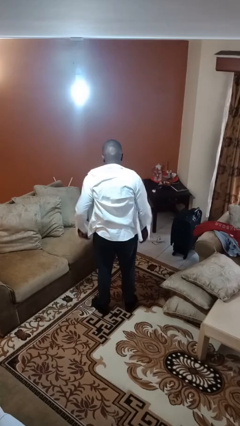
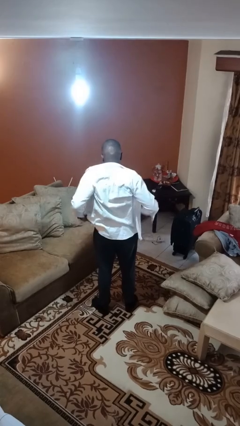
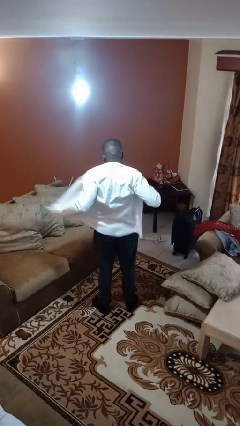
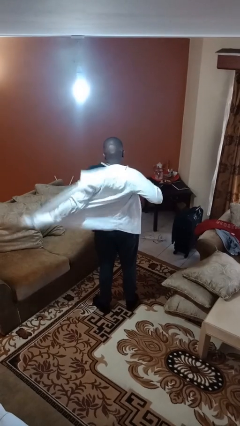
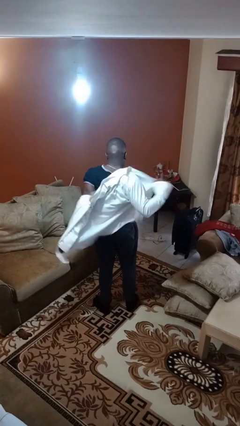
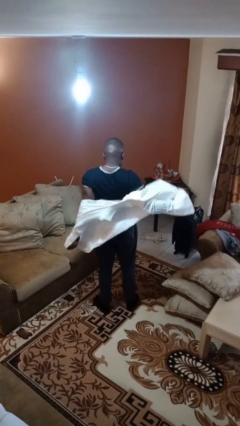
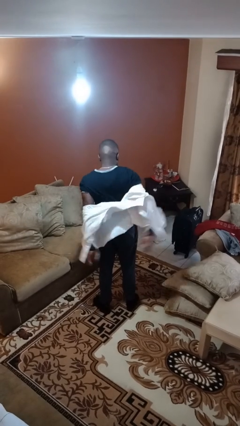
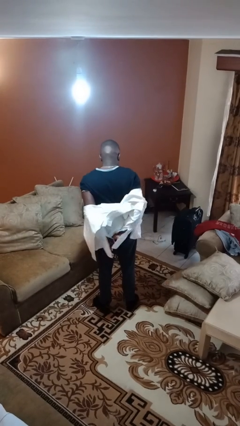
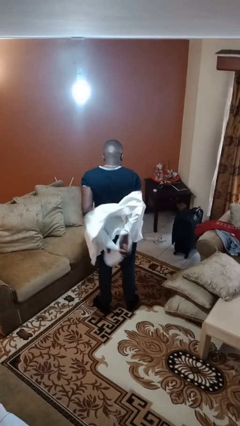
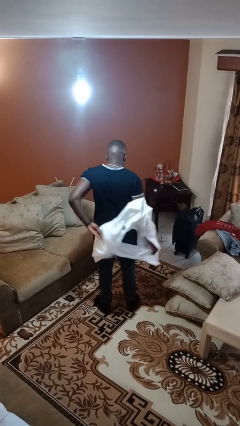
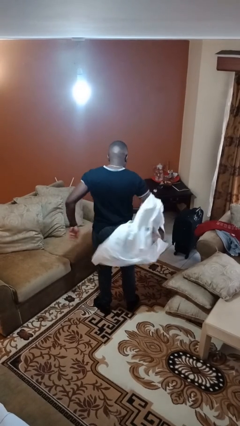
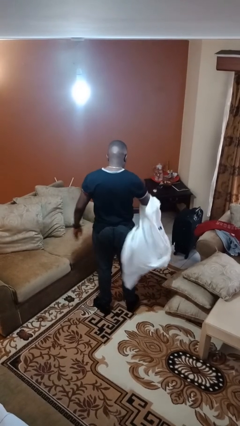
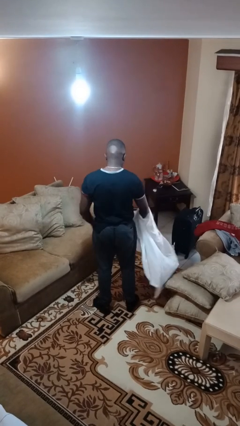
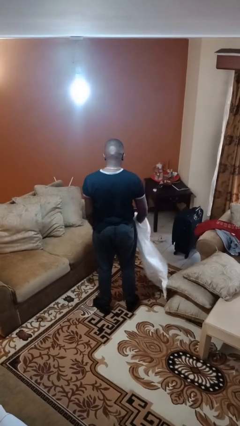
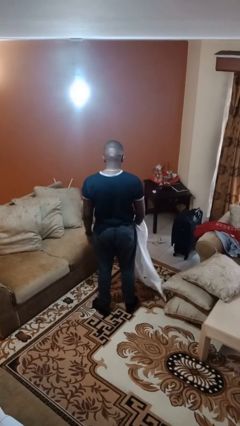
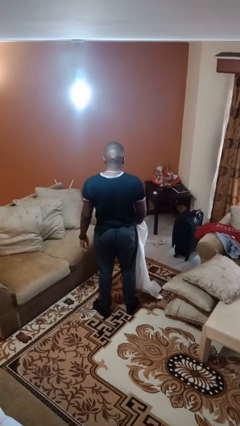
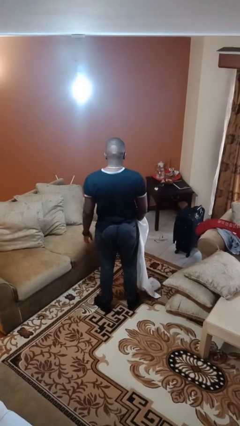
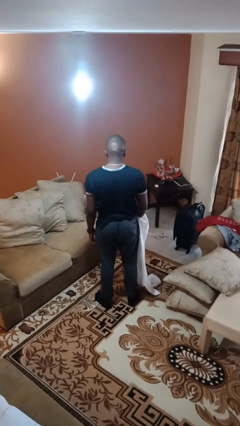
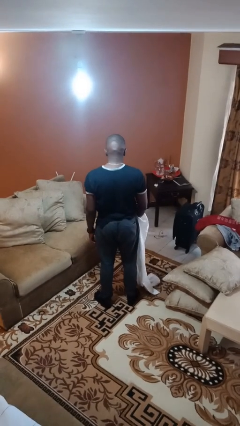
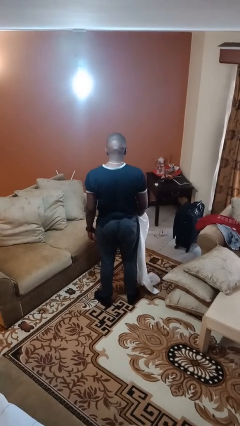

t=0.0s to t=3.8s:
person takes off shirt

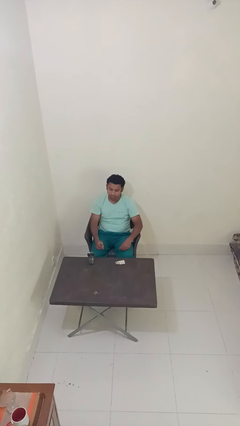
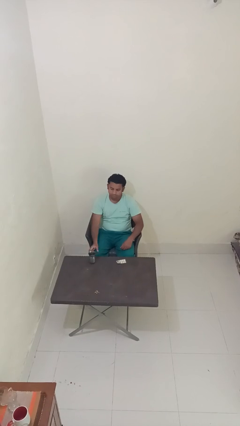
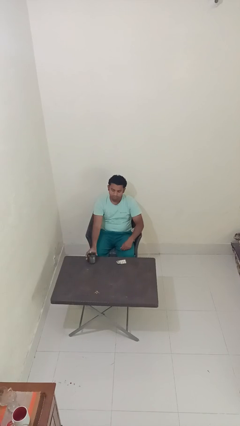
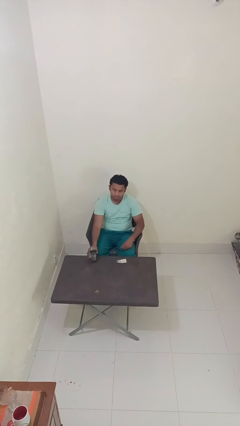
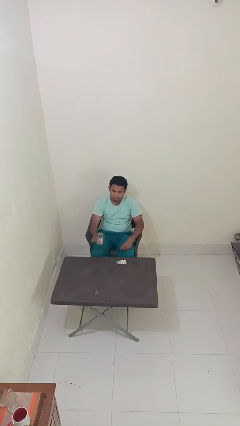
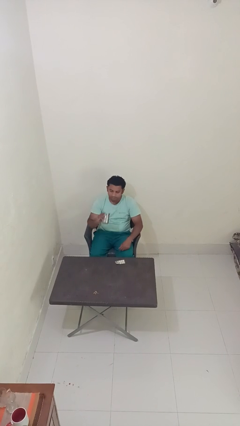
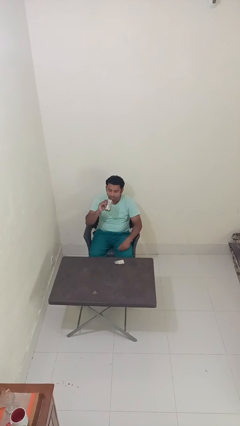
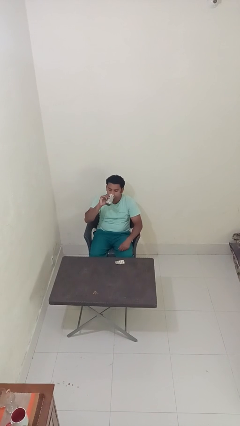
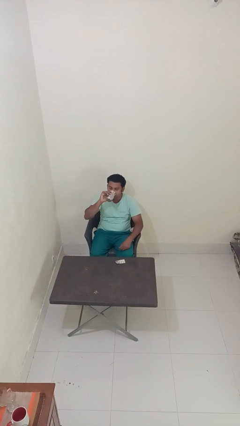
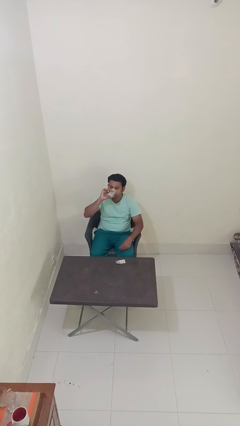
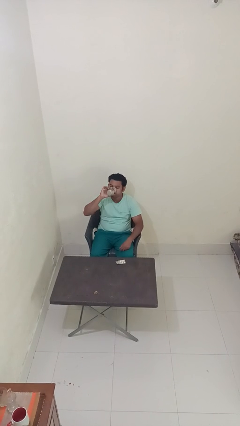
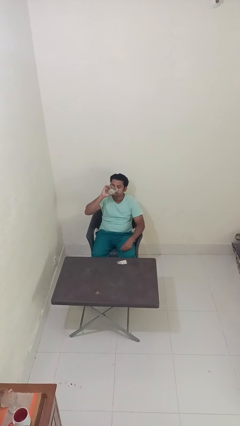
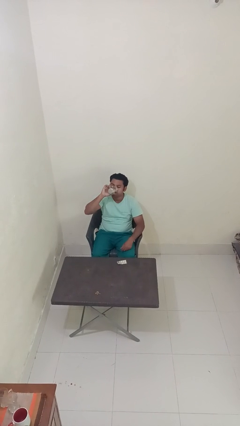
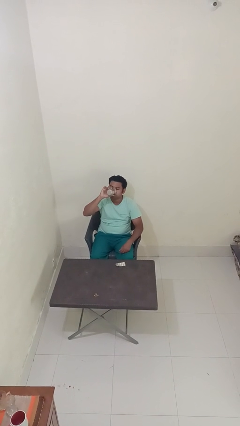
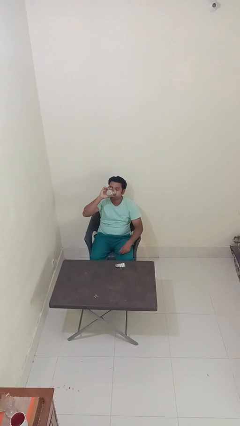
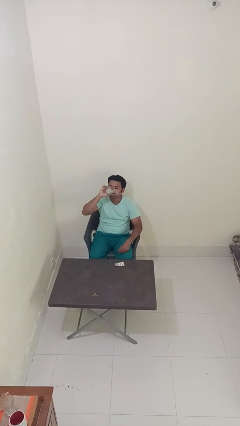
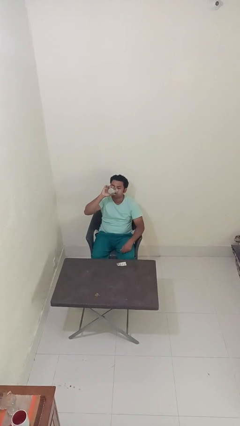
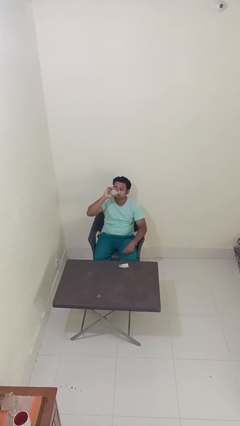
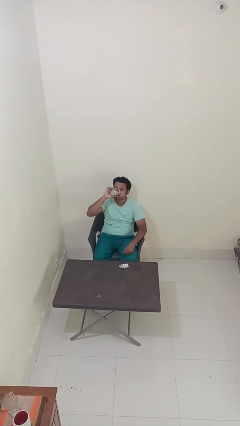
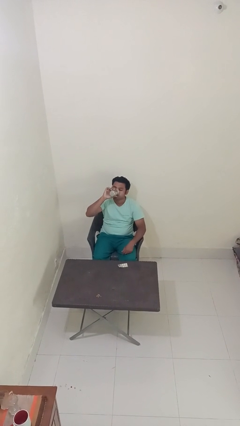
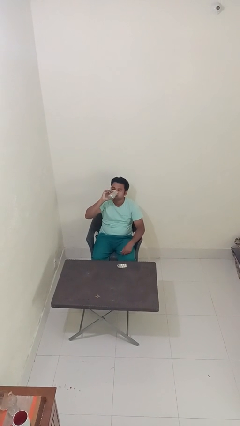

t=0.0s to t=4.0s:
person drinks from cup

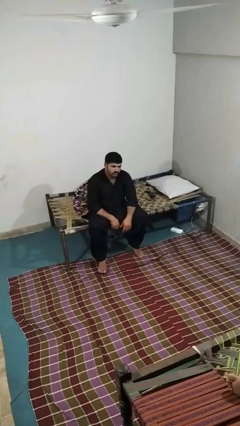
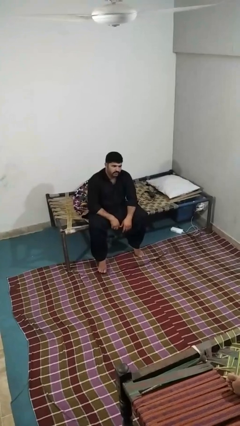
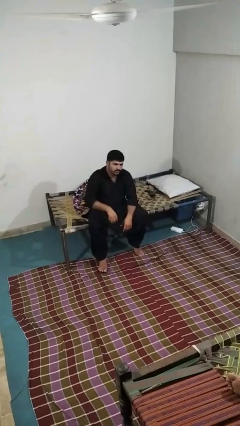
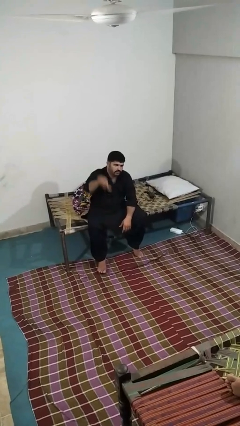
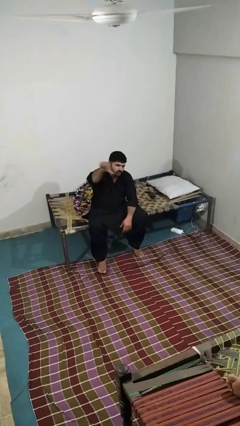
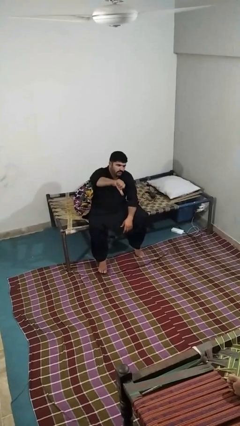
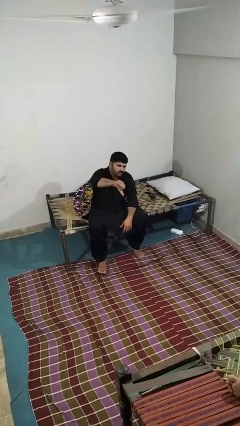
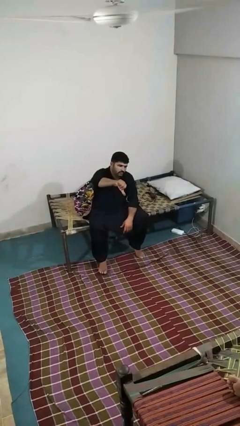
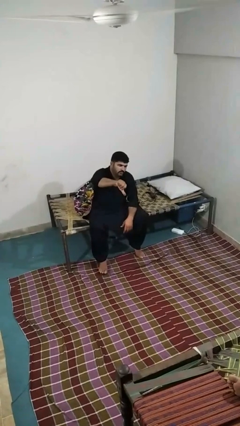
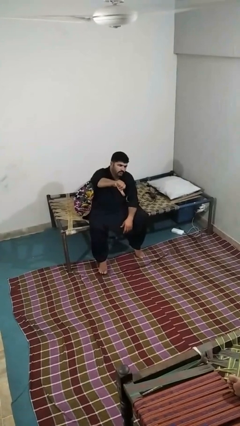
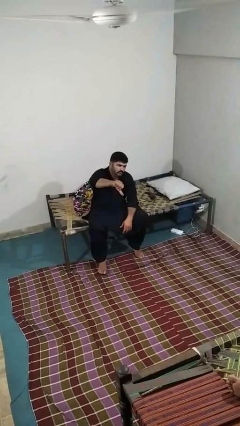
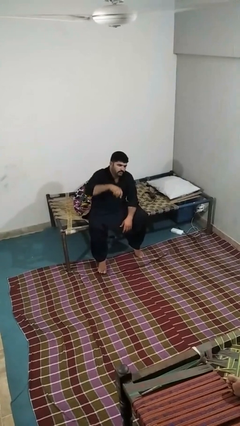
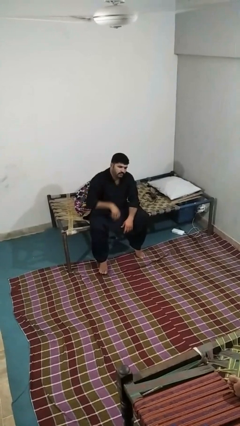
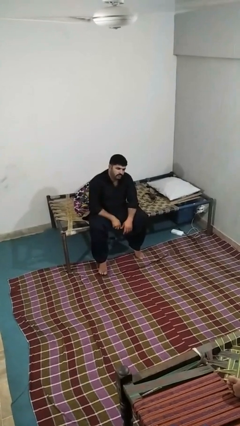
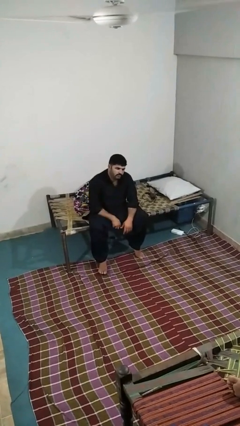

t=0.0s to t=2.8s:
person gestures thumbs down

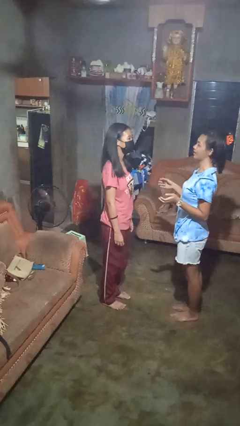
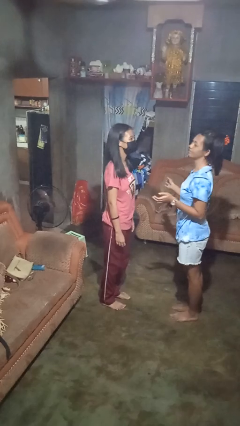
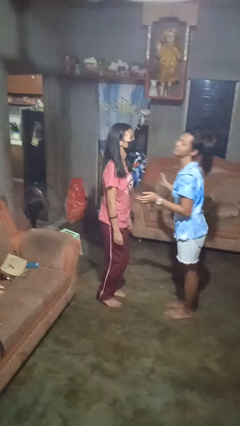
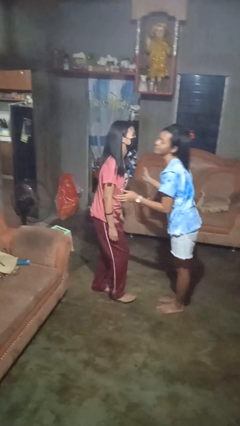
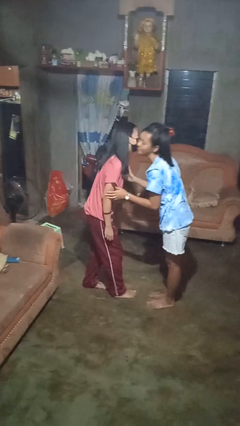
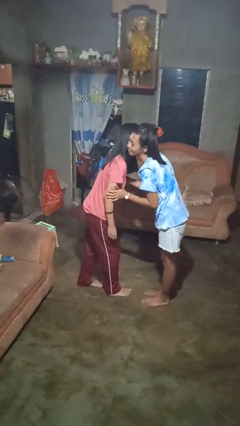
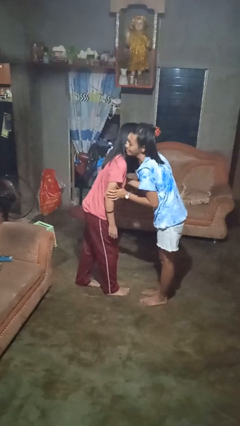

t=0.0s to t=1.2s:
person kisses cheek of person

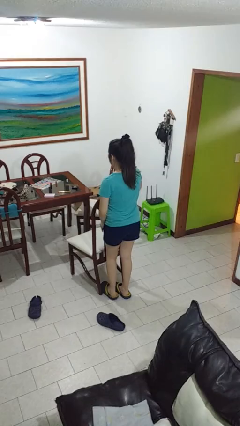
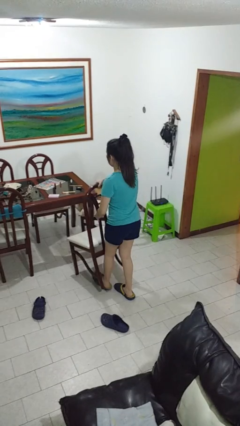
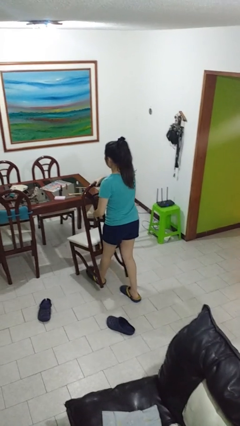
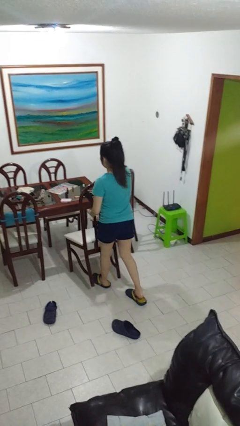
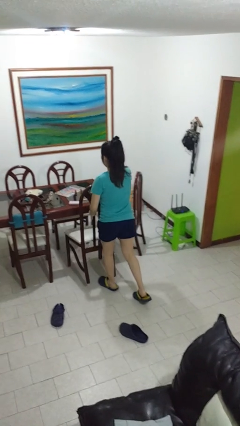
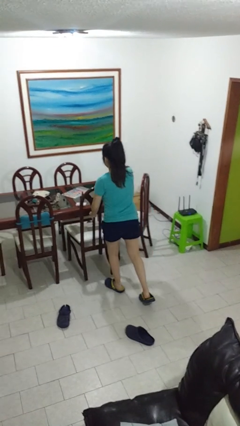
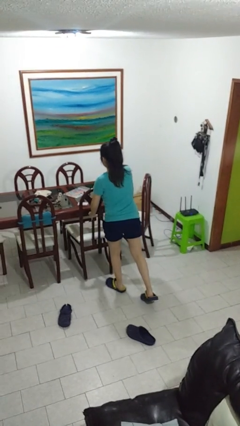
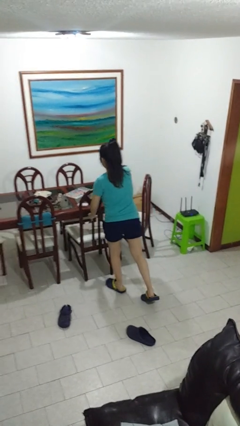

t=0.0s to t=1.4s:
person pushes in chair

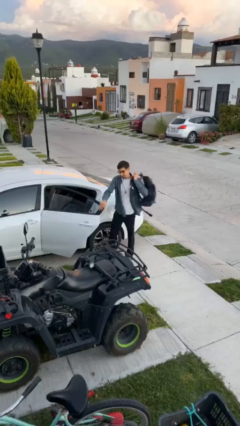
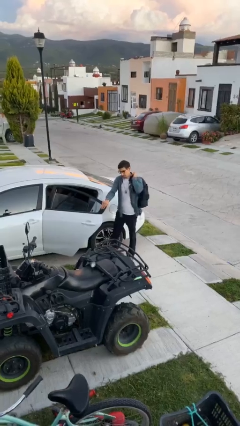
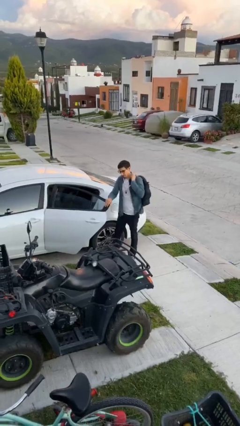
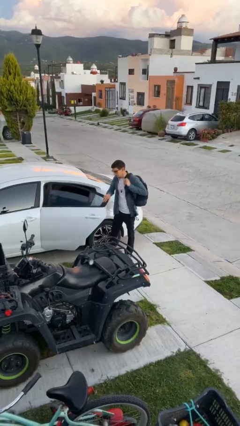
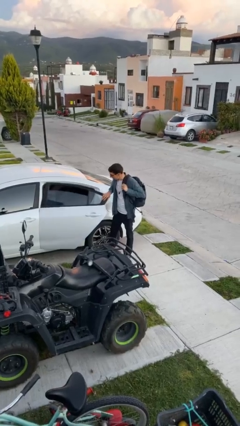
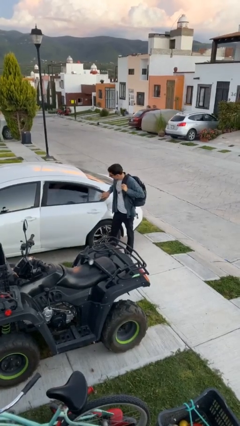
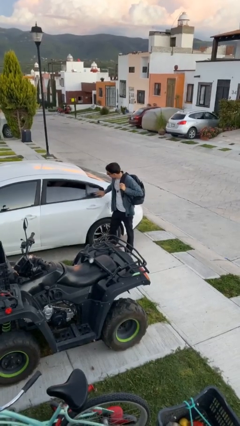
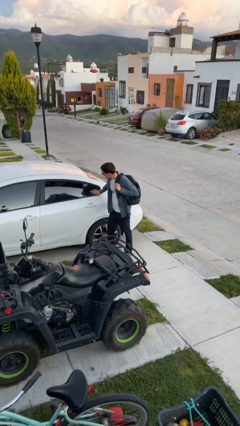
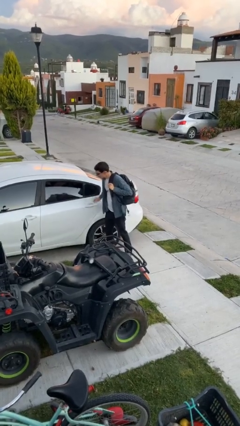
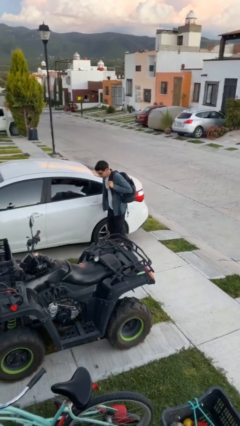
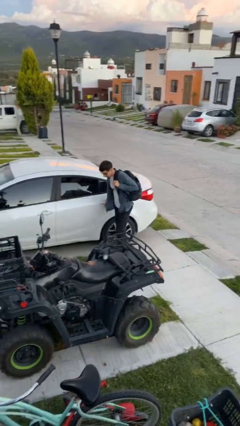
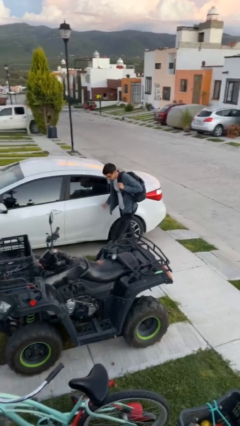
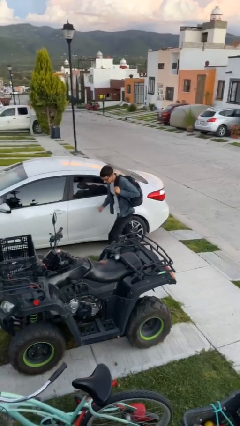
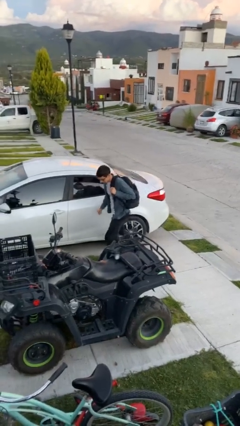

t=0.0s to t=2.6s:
person closes car door

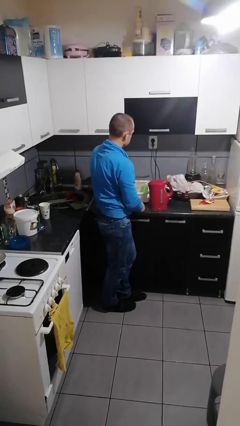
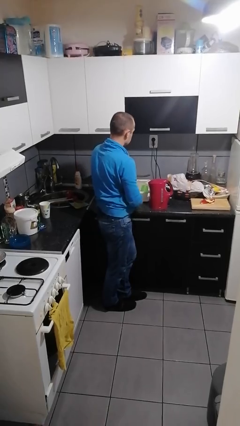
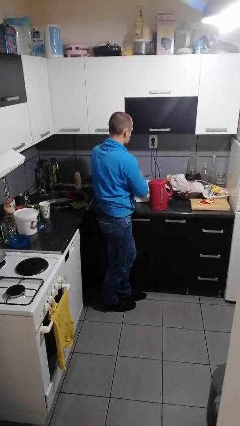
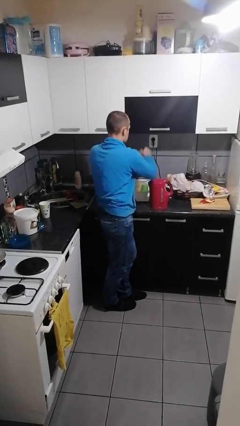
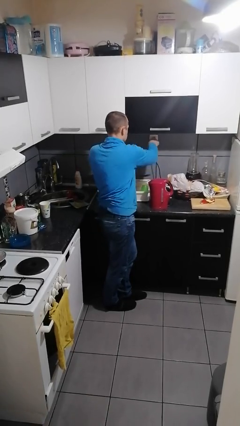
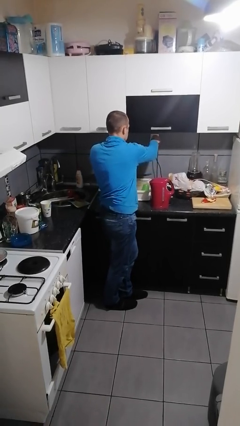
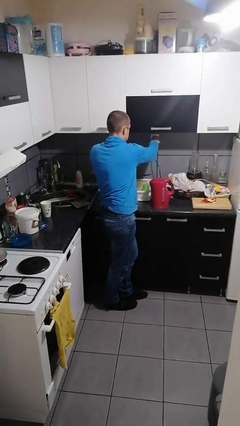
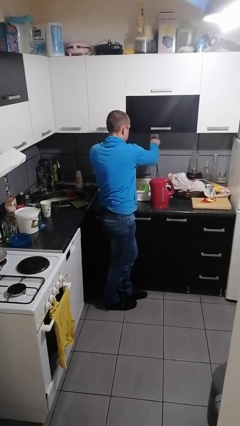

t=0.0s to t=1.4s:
person unplugs from electrical socket
